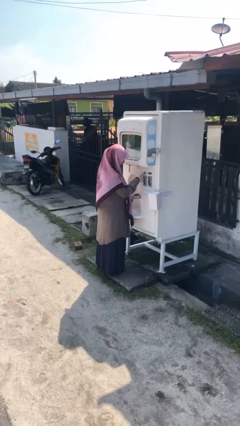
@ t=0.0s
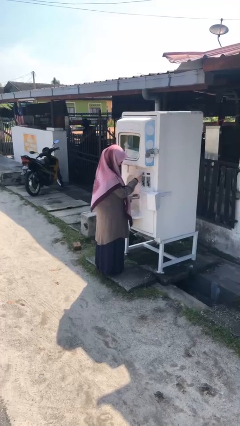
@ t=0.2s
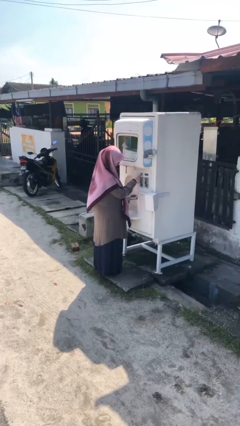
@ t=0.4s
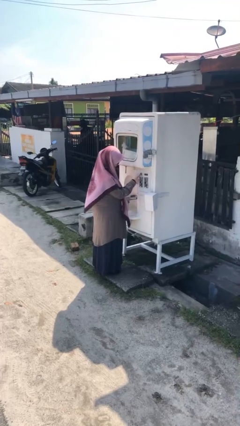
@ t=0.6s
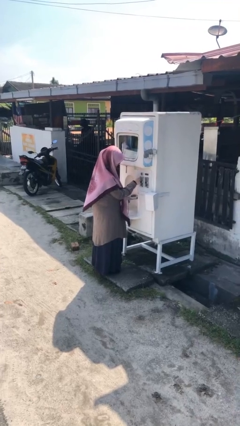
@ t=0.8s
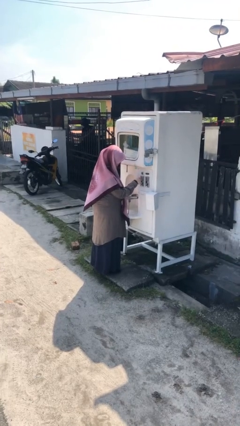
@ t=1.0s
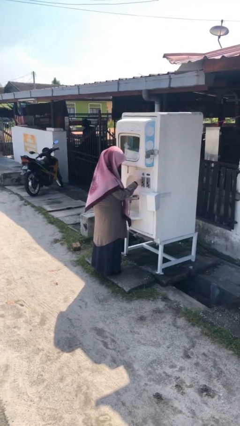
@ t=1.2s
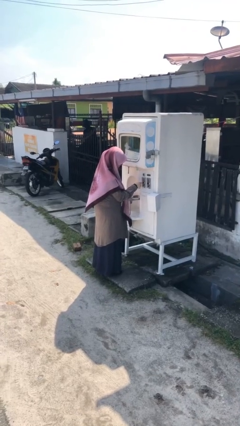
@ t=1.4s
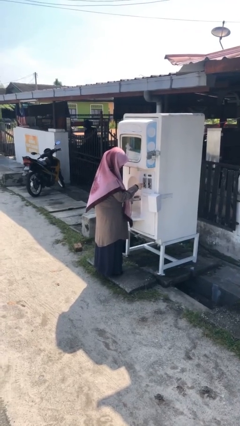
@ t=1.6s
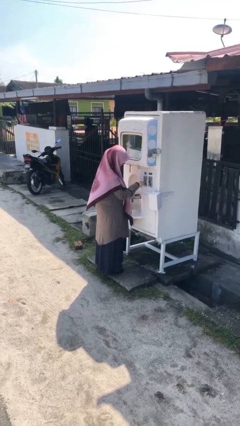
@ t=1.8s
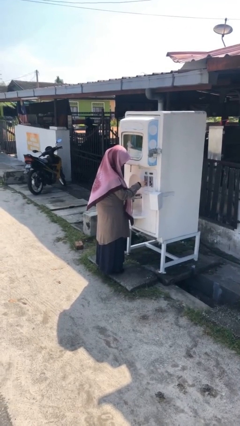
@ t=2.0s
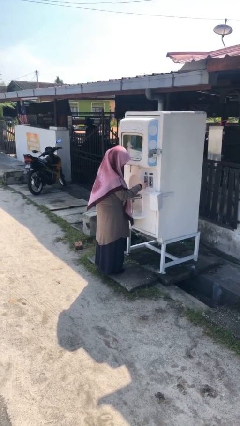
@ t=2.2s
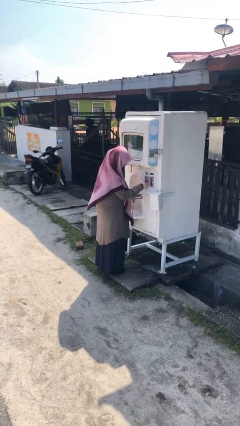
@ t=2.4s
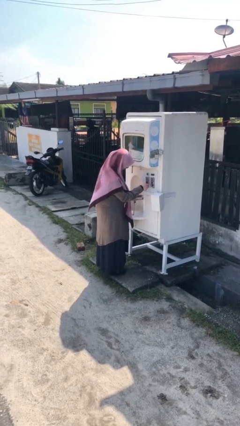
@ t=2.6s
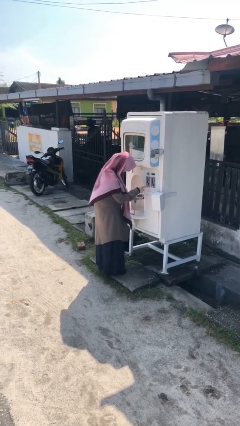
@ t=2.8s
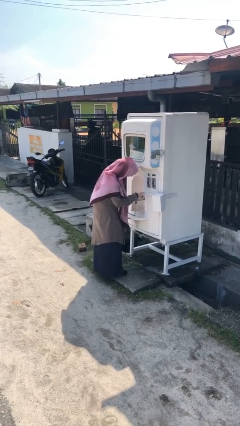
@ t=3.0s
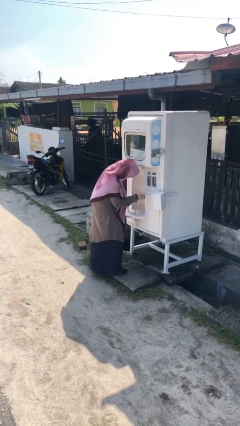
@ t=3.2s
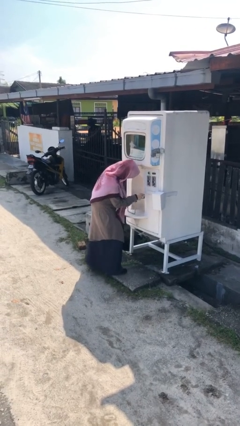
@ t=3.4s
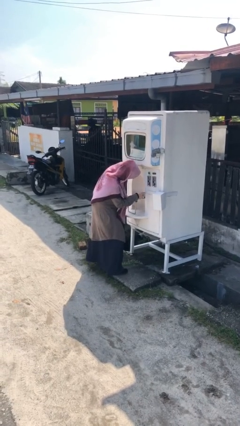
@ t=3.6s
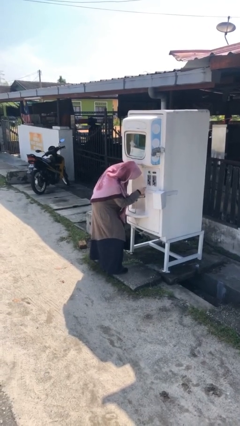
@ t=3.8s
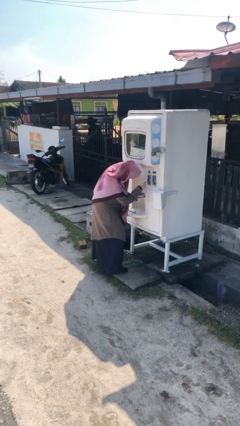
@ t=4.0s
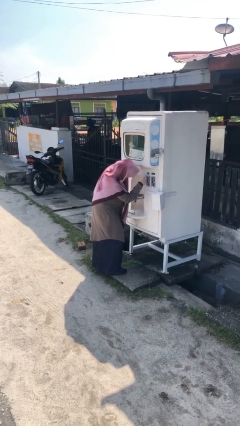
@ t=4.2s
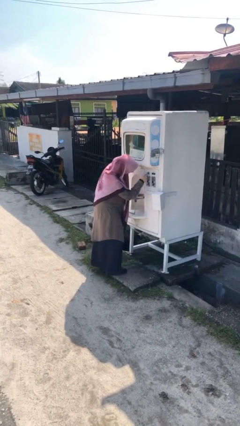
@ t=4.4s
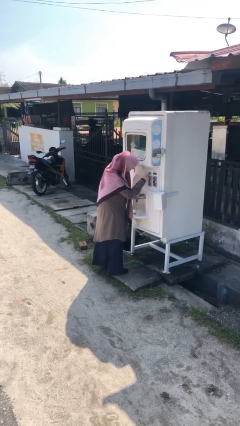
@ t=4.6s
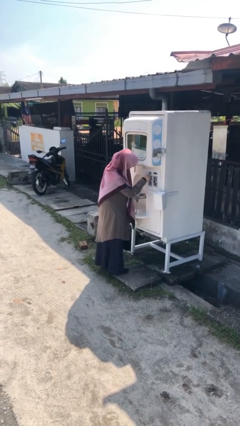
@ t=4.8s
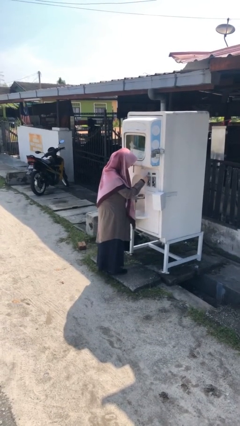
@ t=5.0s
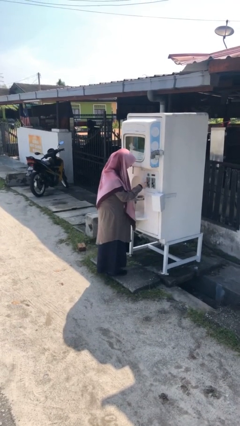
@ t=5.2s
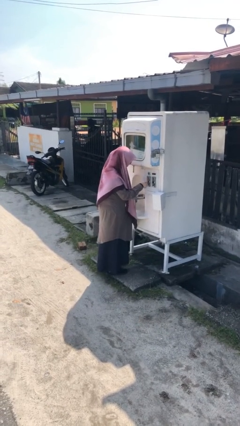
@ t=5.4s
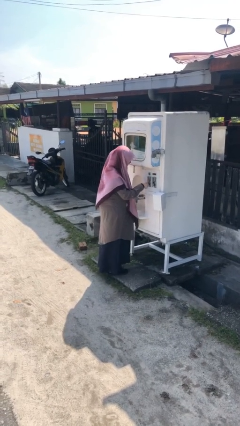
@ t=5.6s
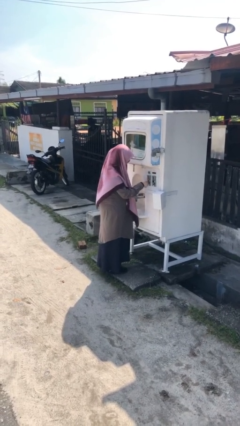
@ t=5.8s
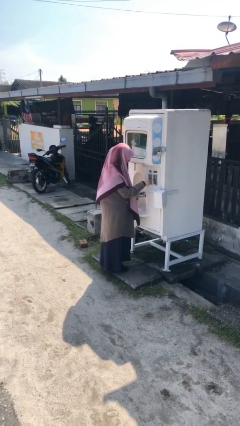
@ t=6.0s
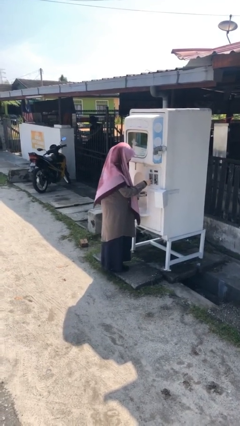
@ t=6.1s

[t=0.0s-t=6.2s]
person purchases from machine

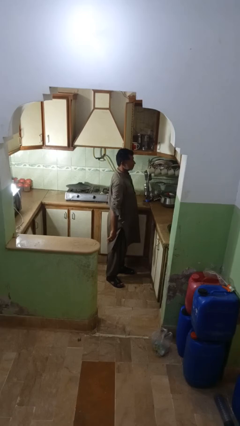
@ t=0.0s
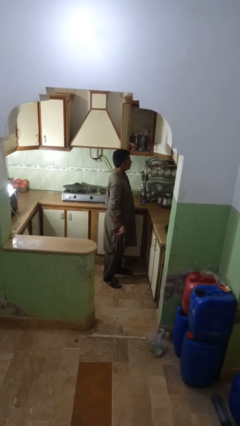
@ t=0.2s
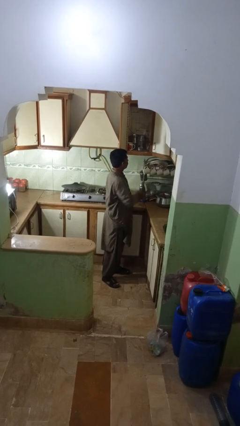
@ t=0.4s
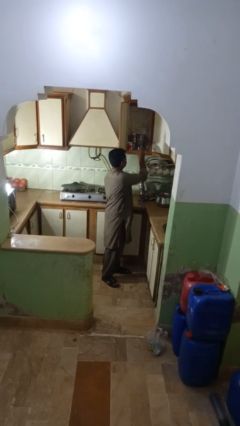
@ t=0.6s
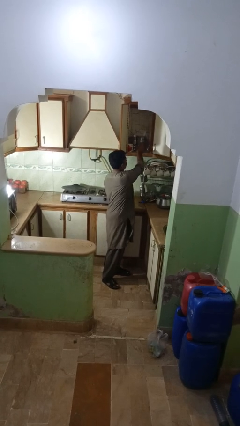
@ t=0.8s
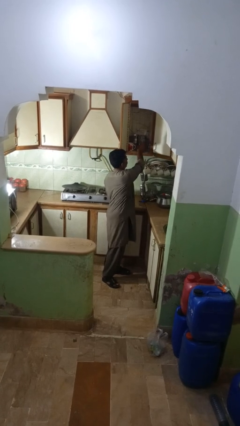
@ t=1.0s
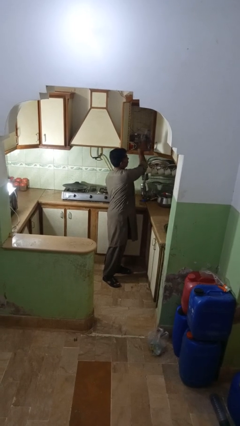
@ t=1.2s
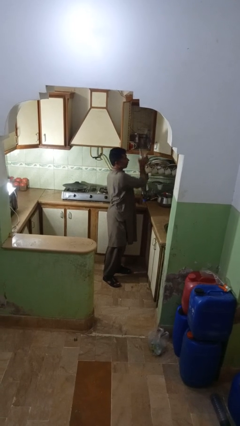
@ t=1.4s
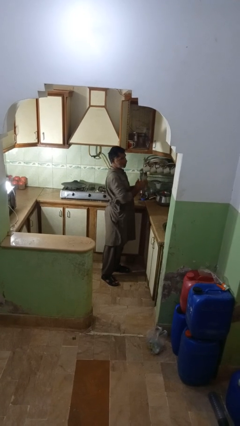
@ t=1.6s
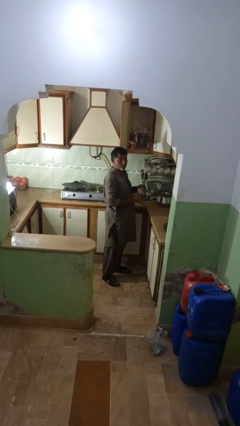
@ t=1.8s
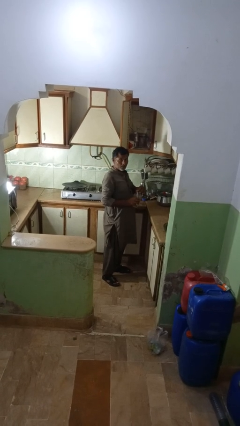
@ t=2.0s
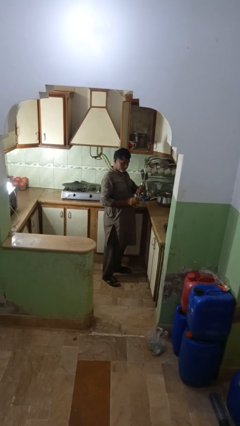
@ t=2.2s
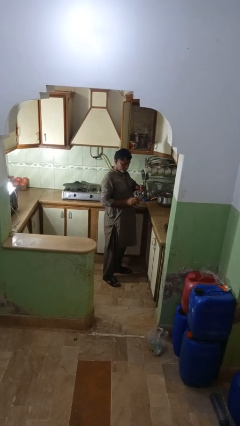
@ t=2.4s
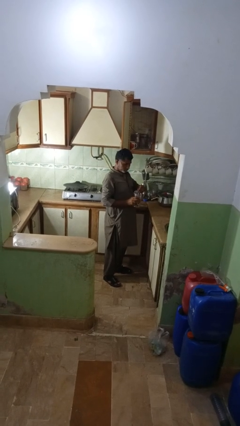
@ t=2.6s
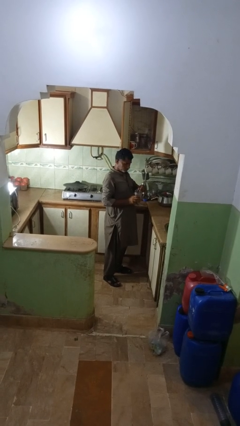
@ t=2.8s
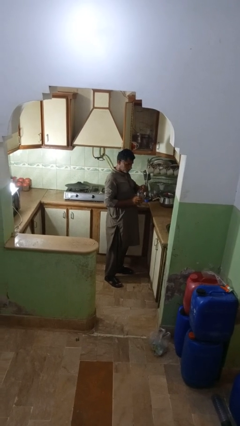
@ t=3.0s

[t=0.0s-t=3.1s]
person takes object from kitchen drawer

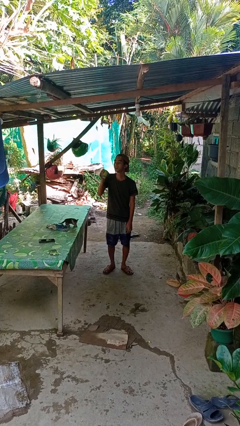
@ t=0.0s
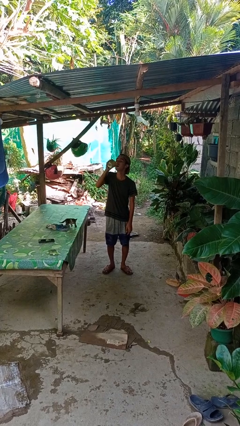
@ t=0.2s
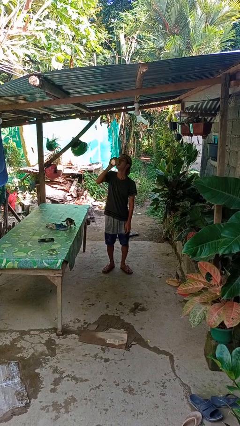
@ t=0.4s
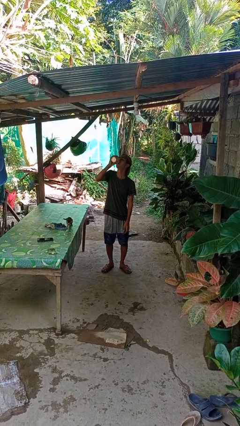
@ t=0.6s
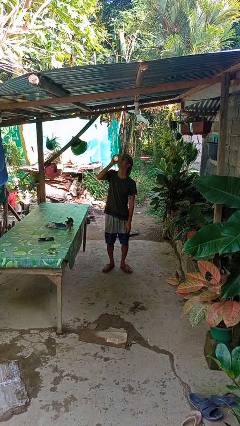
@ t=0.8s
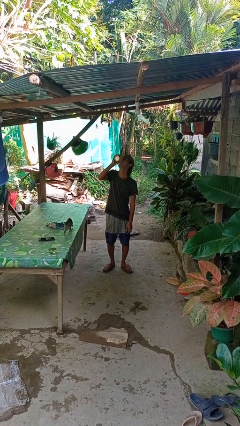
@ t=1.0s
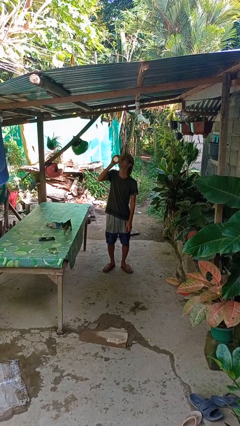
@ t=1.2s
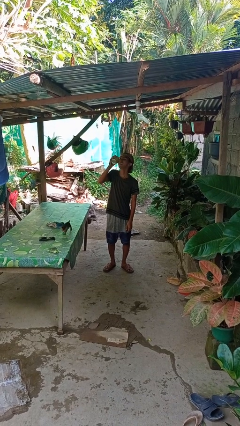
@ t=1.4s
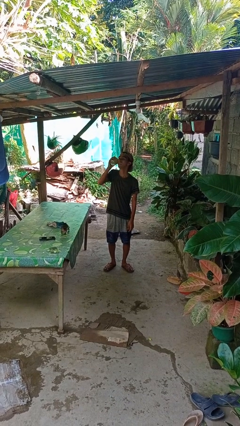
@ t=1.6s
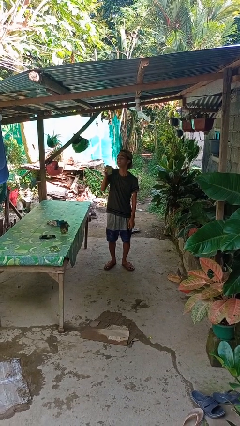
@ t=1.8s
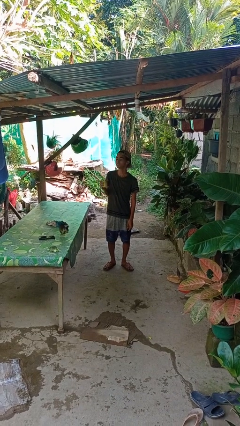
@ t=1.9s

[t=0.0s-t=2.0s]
person drinks from beverage can

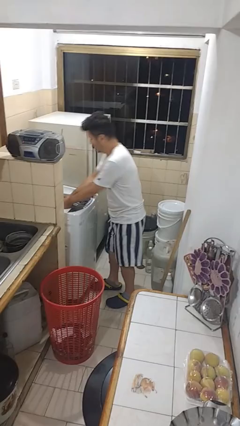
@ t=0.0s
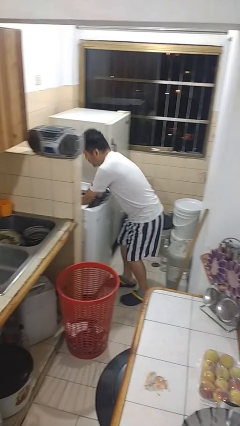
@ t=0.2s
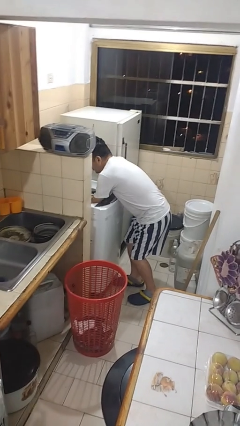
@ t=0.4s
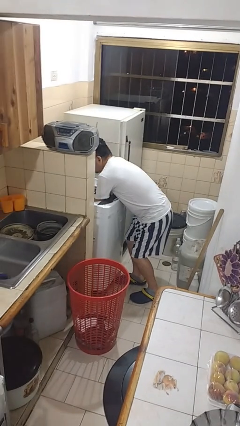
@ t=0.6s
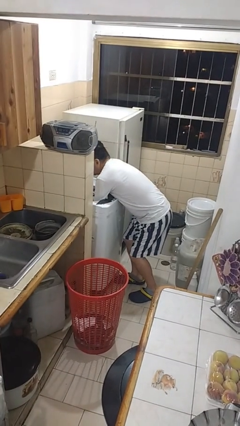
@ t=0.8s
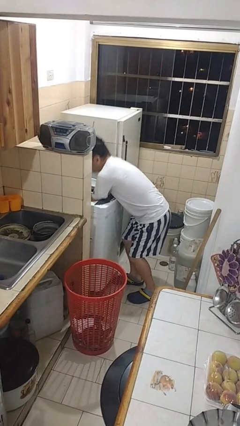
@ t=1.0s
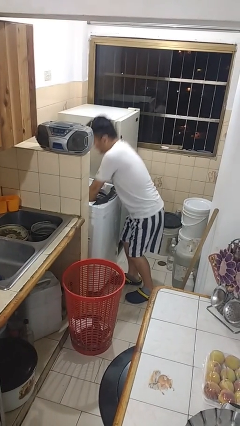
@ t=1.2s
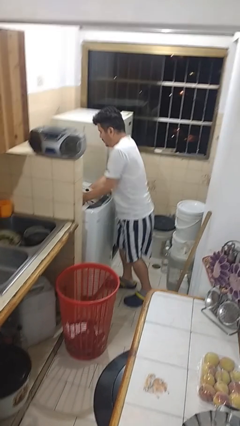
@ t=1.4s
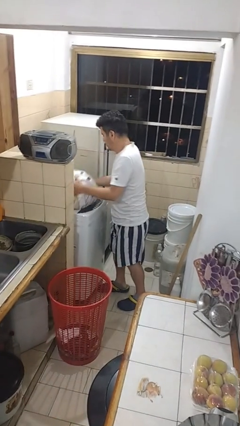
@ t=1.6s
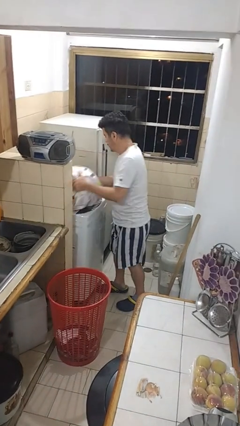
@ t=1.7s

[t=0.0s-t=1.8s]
person unloads clotheswasher

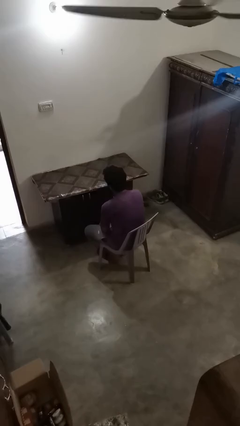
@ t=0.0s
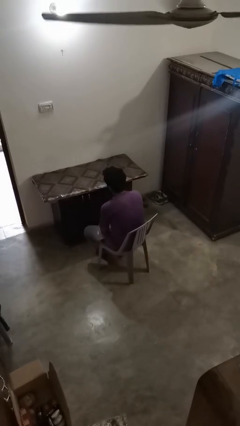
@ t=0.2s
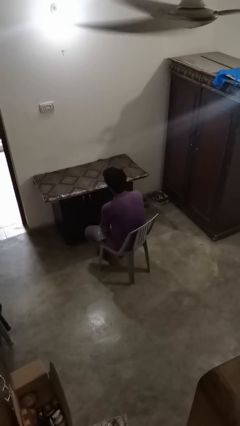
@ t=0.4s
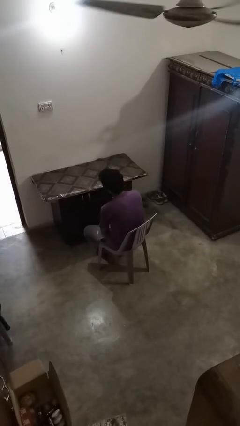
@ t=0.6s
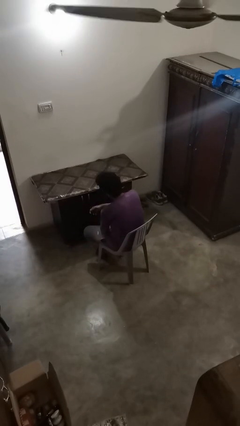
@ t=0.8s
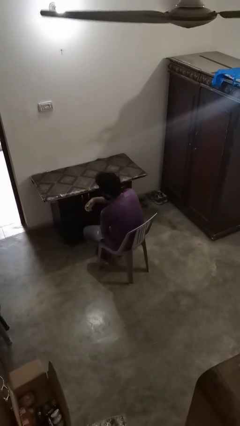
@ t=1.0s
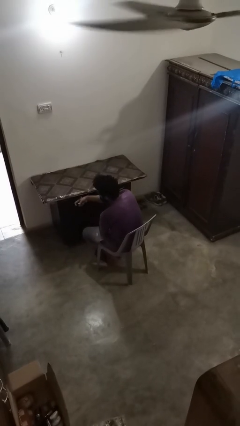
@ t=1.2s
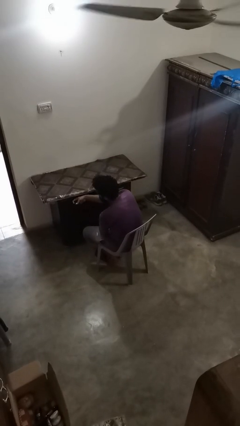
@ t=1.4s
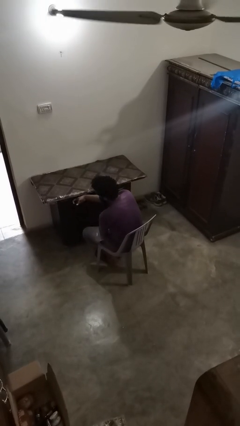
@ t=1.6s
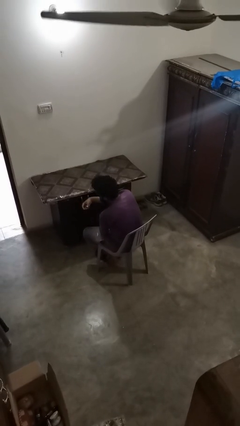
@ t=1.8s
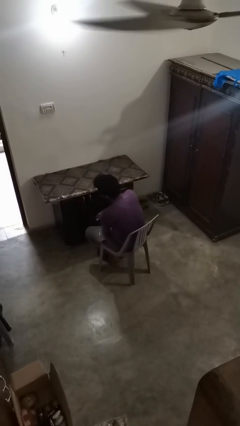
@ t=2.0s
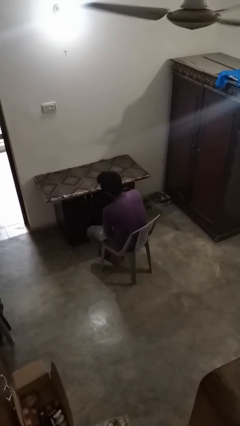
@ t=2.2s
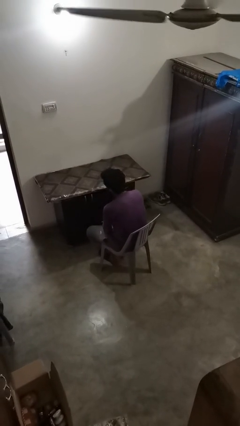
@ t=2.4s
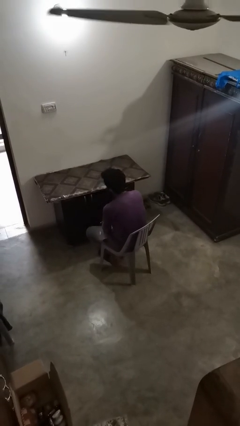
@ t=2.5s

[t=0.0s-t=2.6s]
person knocks over furniture

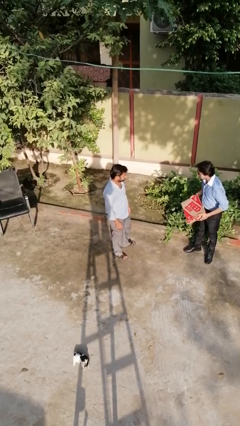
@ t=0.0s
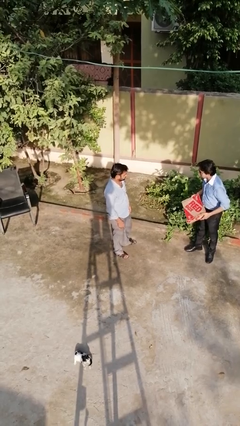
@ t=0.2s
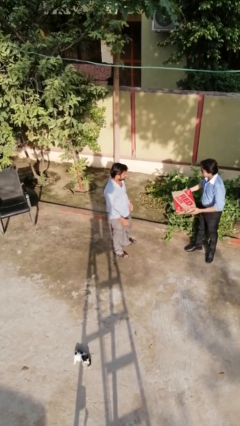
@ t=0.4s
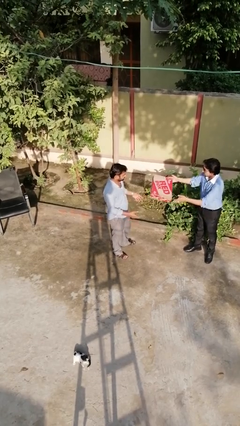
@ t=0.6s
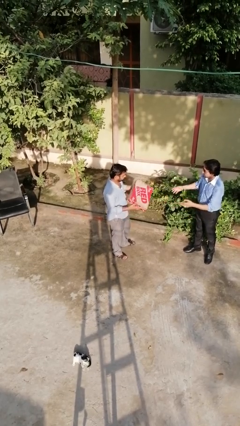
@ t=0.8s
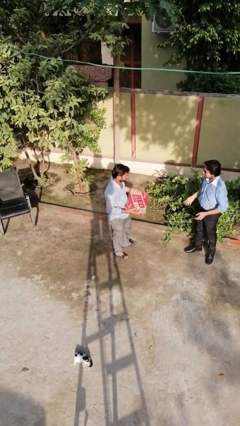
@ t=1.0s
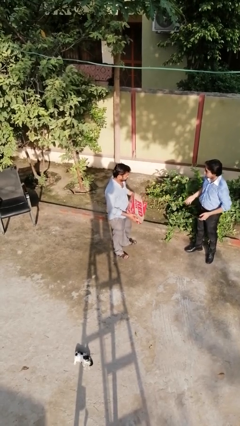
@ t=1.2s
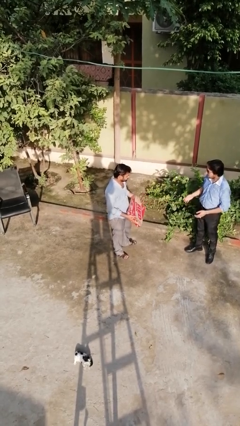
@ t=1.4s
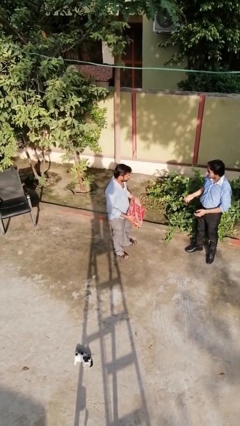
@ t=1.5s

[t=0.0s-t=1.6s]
person catches object from person

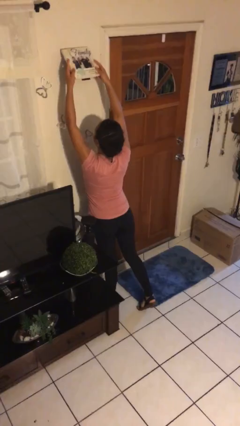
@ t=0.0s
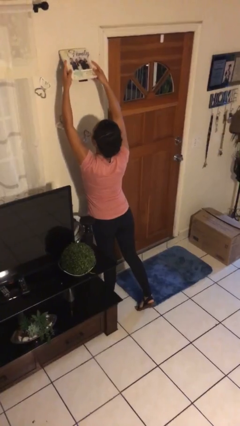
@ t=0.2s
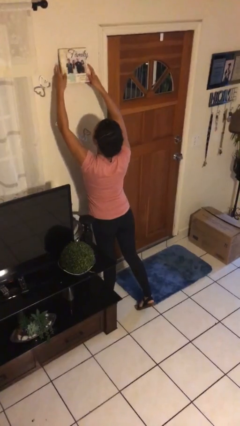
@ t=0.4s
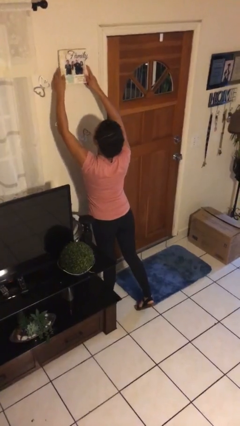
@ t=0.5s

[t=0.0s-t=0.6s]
person puts up picture frame
